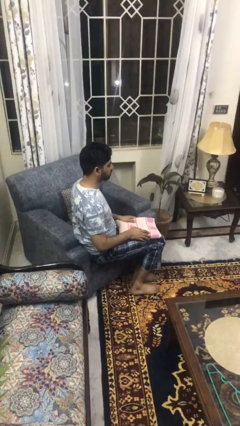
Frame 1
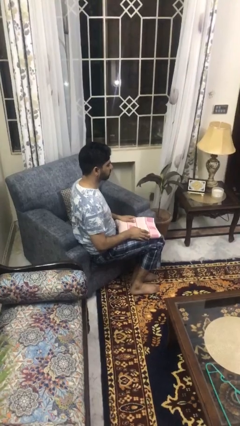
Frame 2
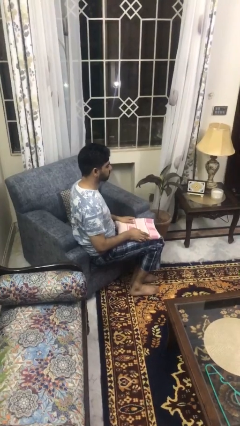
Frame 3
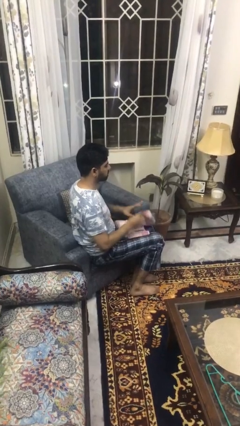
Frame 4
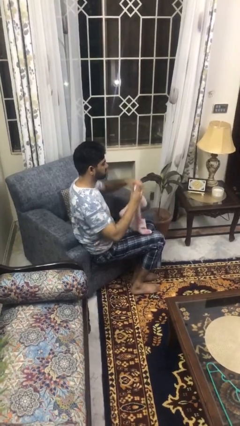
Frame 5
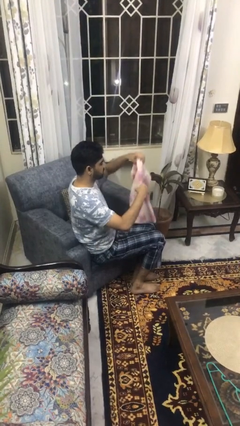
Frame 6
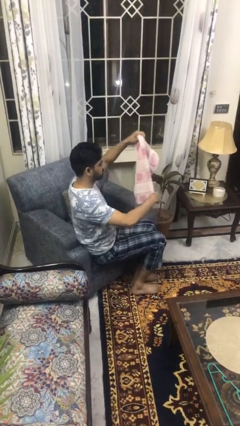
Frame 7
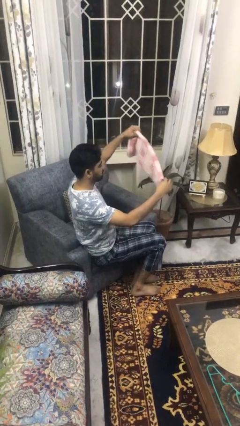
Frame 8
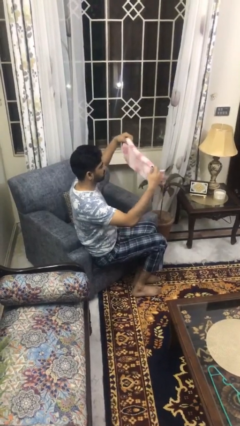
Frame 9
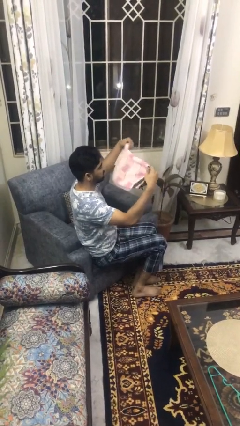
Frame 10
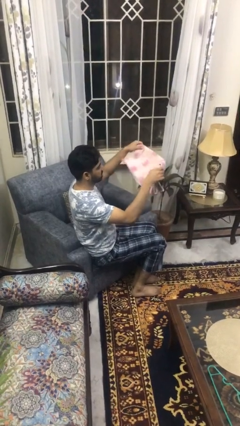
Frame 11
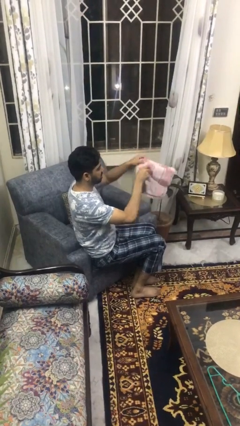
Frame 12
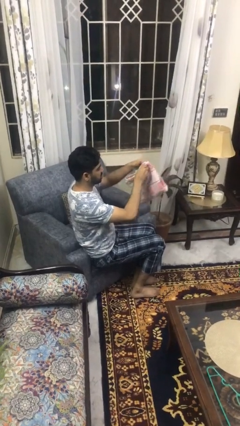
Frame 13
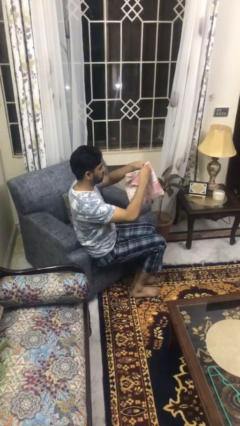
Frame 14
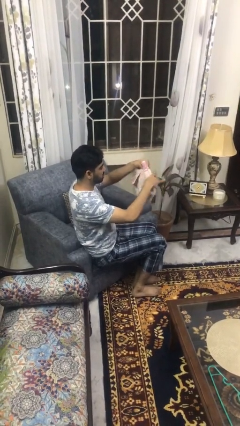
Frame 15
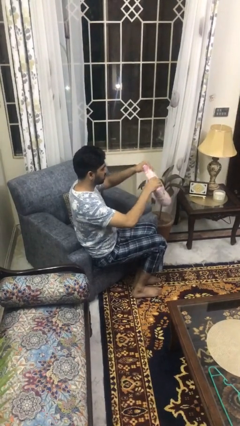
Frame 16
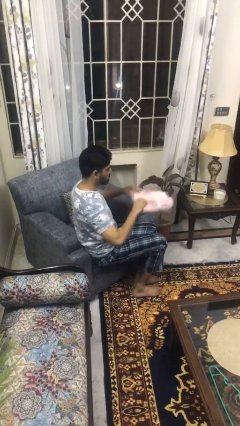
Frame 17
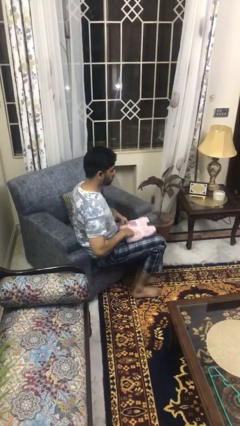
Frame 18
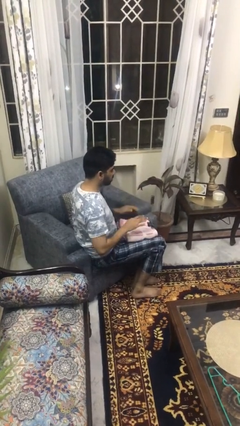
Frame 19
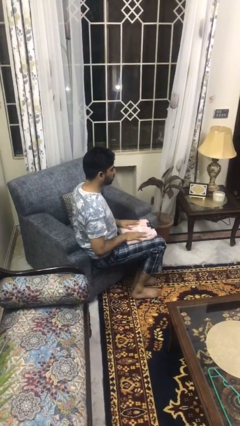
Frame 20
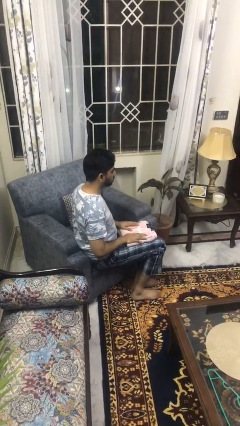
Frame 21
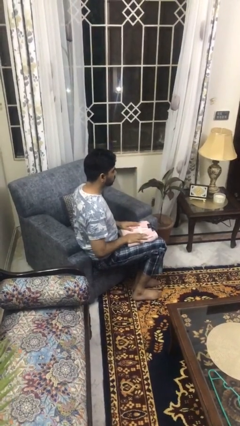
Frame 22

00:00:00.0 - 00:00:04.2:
person folds towel

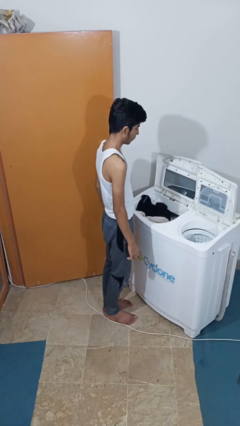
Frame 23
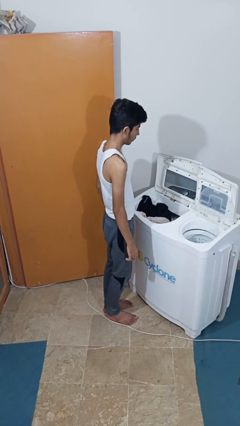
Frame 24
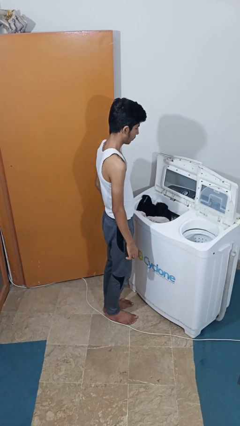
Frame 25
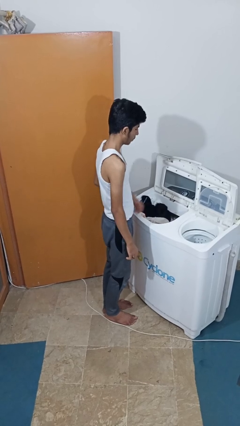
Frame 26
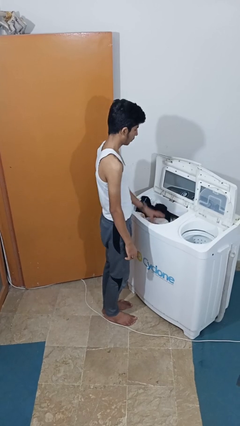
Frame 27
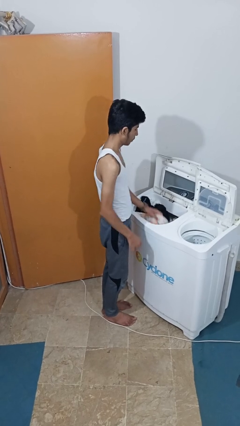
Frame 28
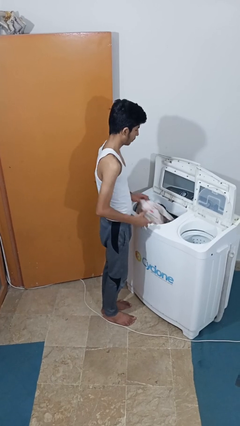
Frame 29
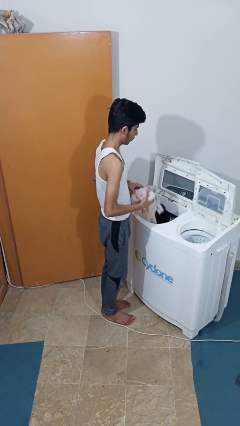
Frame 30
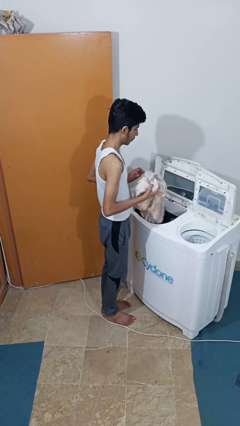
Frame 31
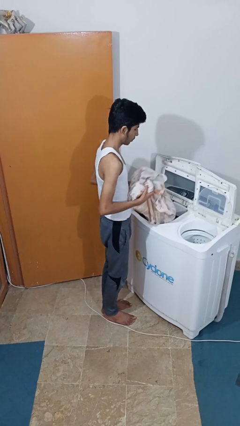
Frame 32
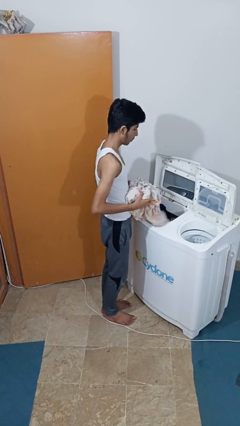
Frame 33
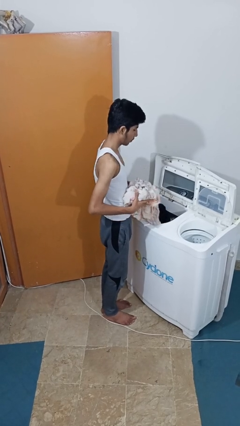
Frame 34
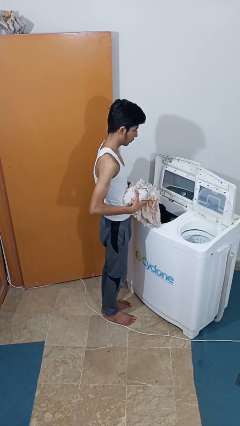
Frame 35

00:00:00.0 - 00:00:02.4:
person unloads clotheswasher

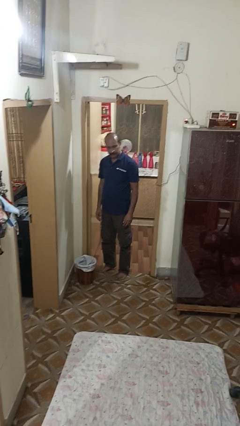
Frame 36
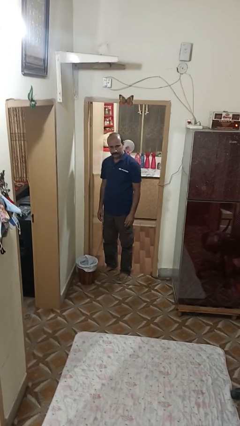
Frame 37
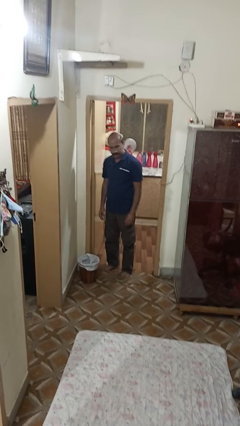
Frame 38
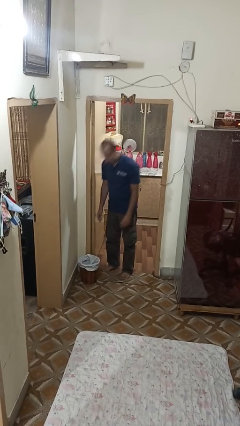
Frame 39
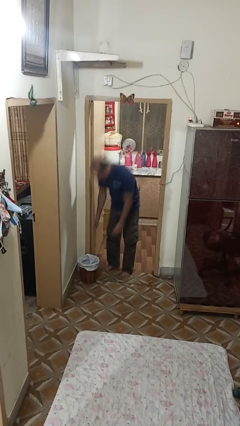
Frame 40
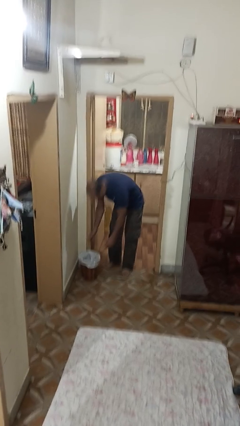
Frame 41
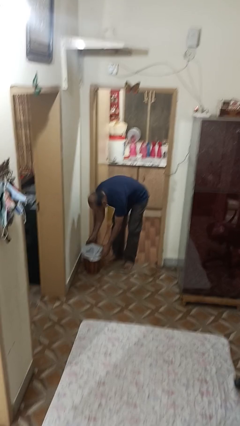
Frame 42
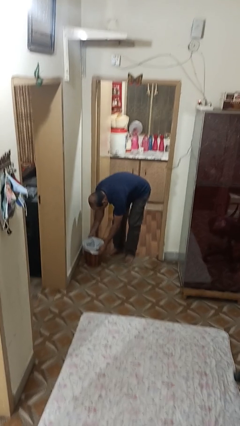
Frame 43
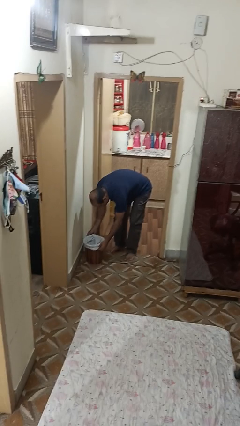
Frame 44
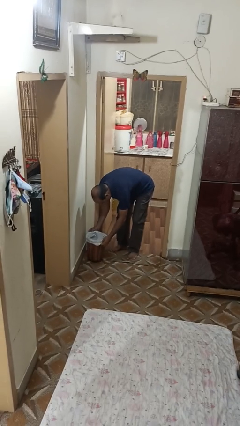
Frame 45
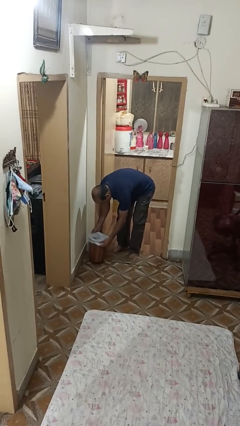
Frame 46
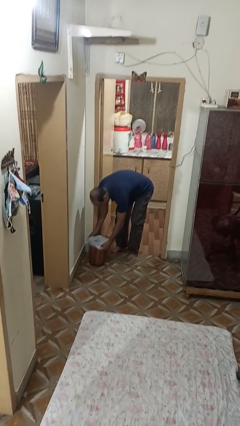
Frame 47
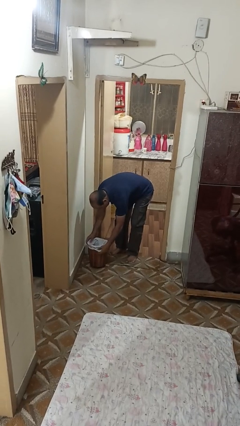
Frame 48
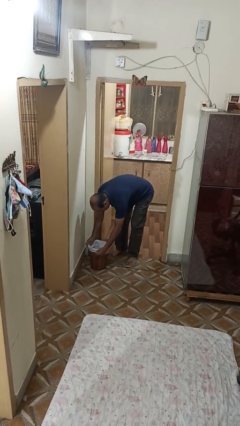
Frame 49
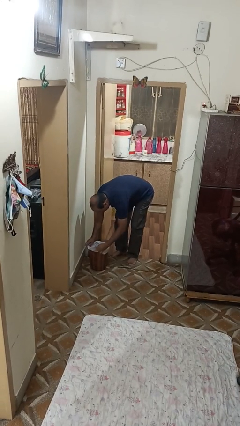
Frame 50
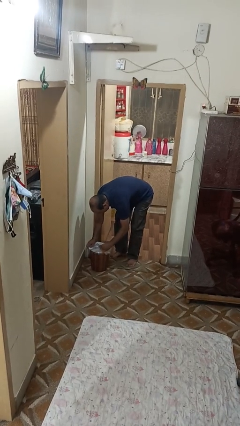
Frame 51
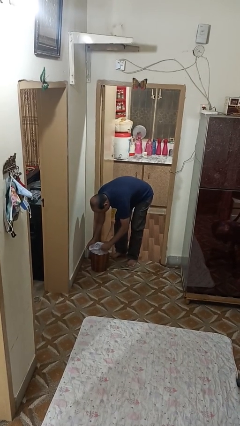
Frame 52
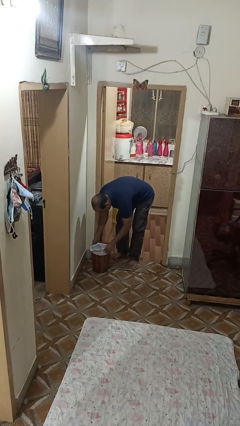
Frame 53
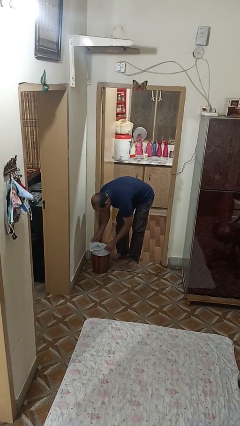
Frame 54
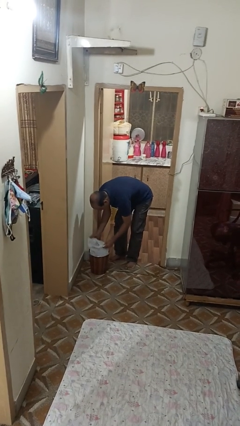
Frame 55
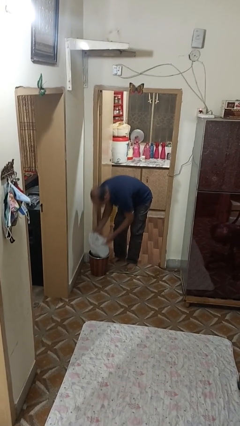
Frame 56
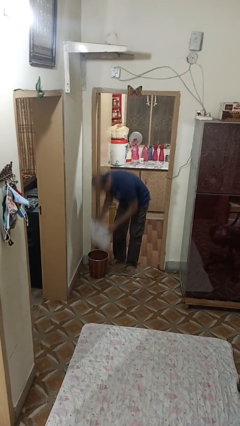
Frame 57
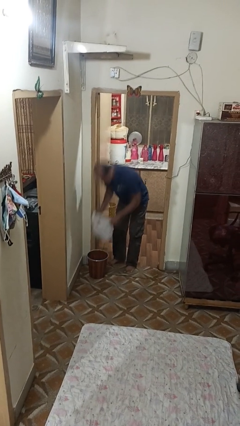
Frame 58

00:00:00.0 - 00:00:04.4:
person removes trashbag from trashcan

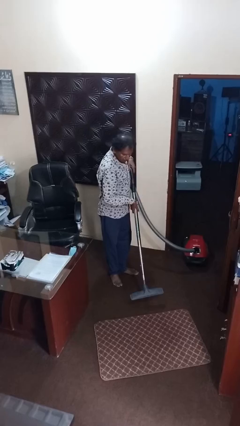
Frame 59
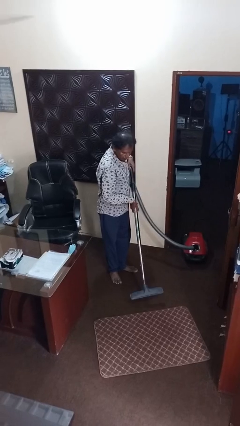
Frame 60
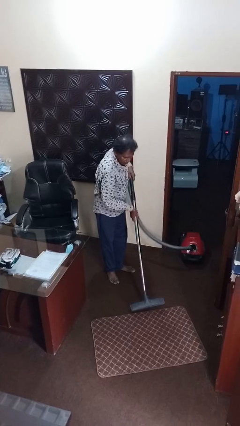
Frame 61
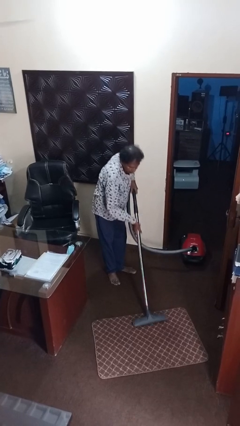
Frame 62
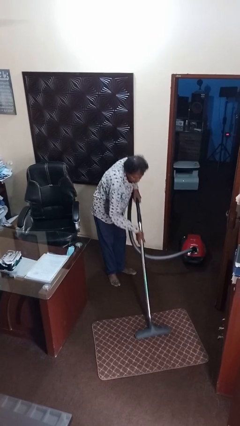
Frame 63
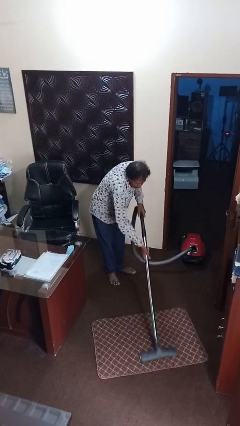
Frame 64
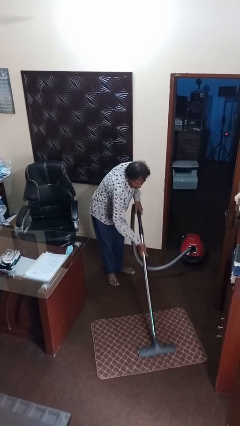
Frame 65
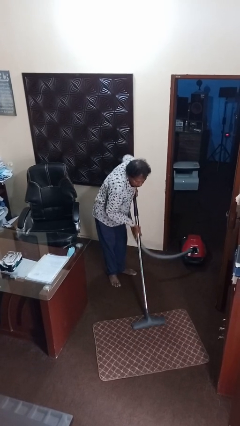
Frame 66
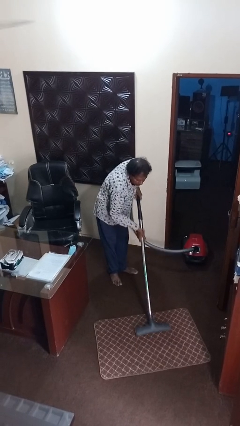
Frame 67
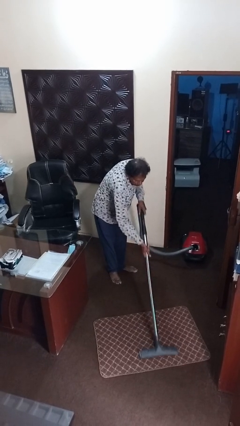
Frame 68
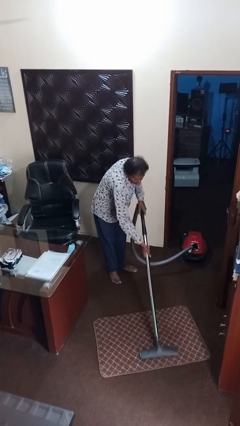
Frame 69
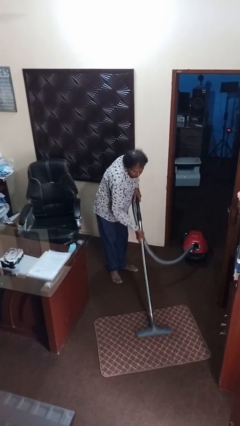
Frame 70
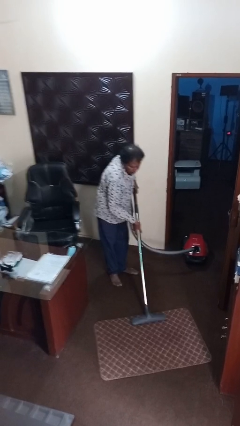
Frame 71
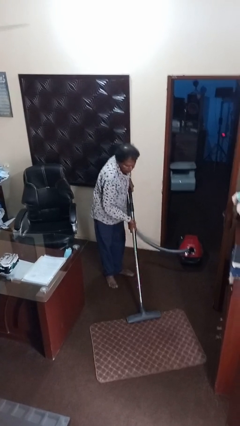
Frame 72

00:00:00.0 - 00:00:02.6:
person vacuums carpet

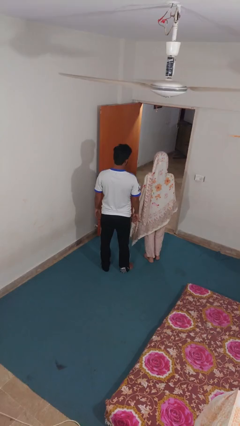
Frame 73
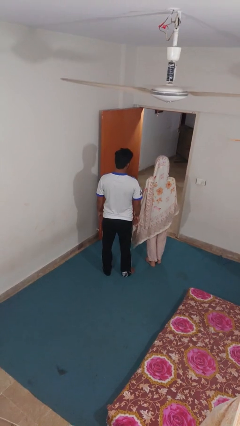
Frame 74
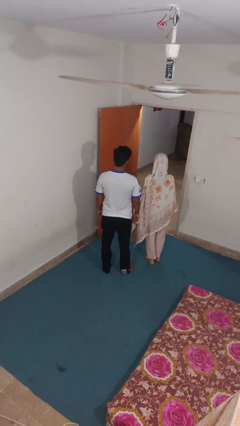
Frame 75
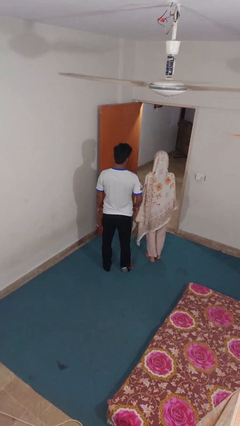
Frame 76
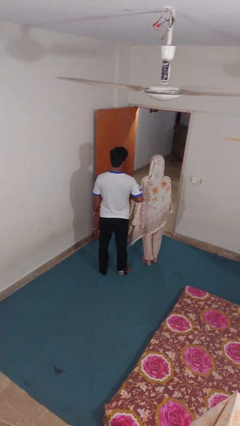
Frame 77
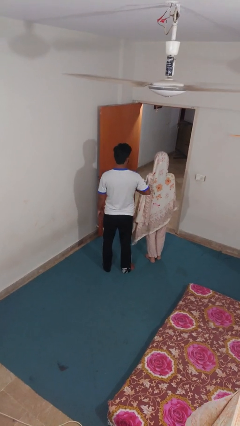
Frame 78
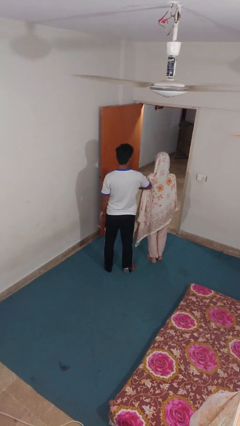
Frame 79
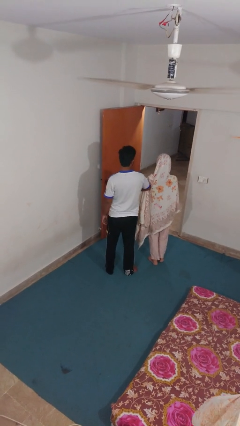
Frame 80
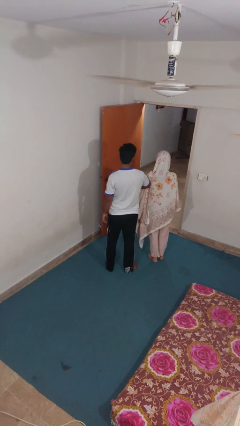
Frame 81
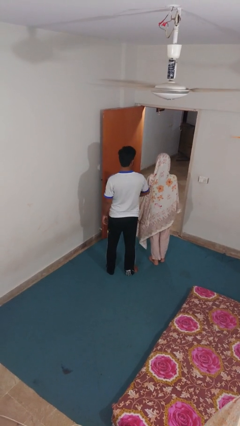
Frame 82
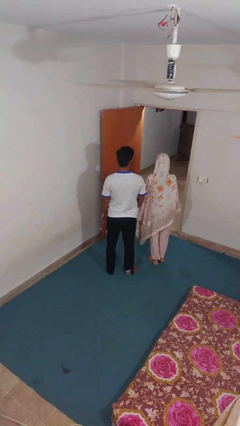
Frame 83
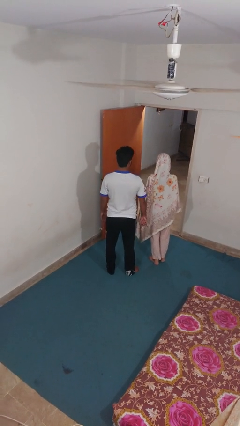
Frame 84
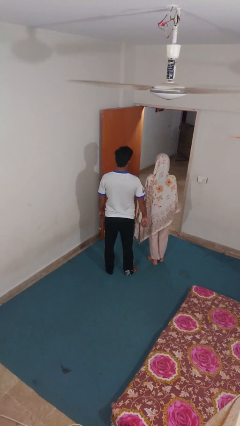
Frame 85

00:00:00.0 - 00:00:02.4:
person nudges person with elbow

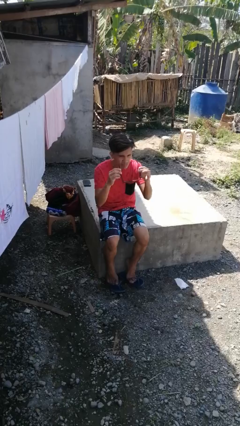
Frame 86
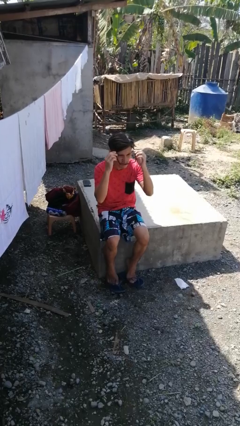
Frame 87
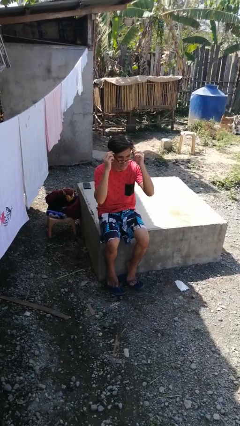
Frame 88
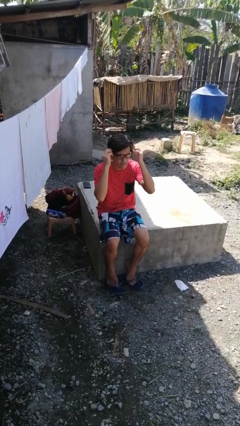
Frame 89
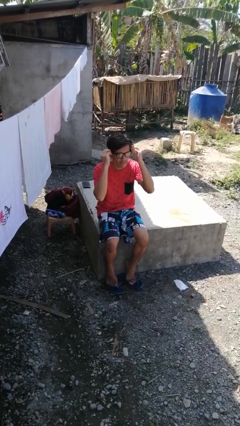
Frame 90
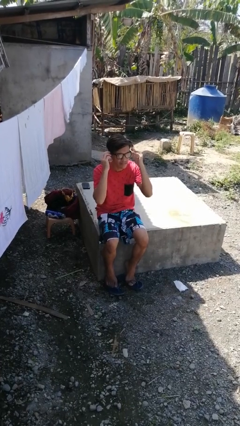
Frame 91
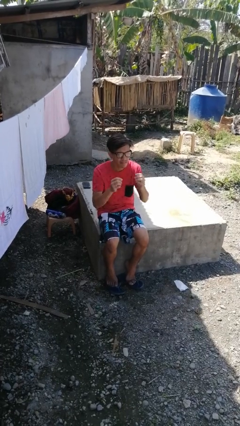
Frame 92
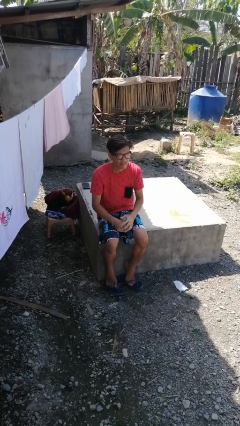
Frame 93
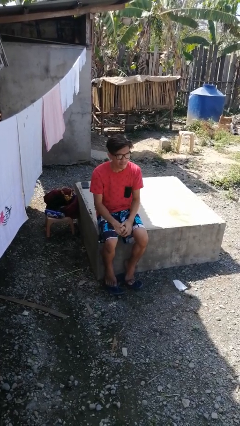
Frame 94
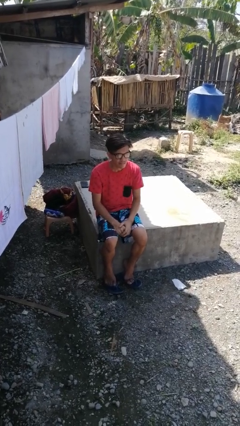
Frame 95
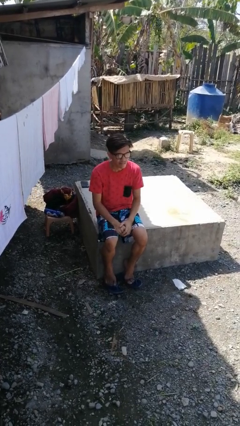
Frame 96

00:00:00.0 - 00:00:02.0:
person puts on glasses
